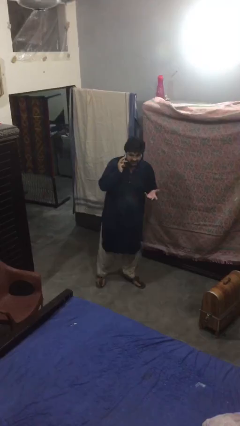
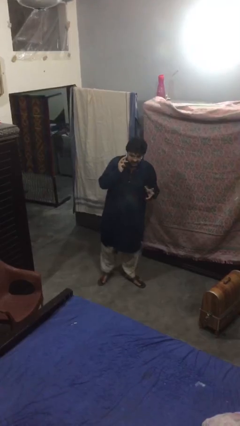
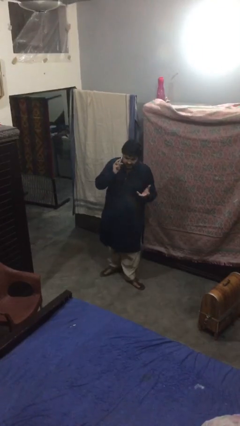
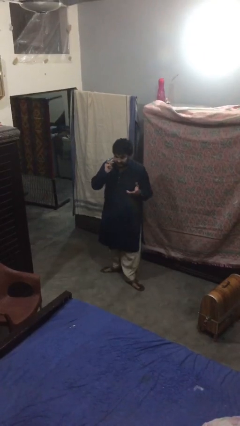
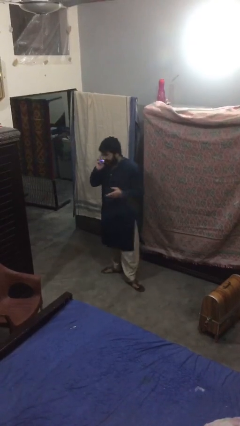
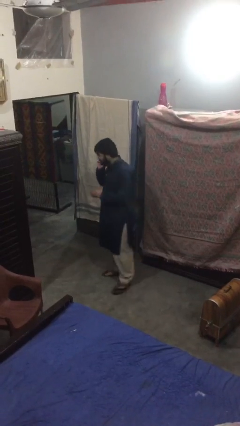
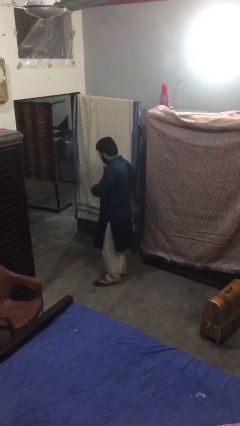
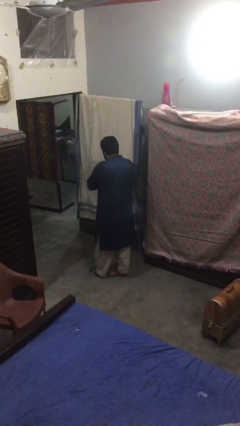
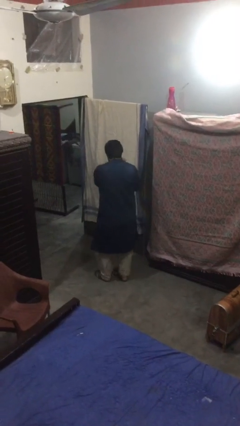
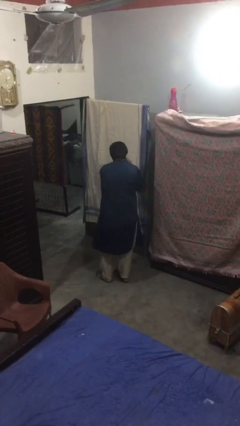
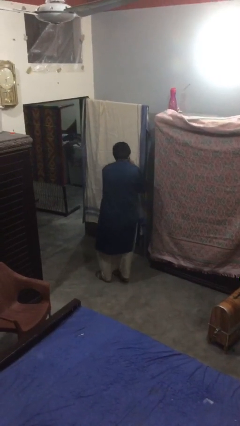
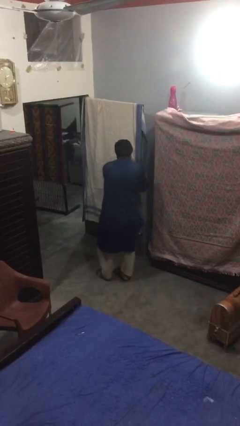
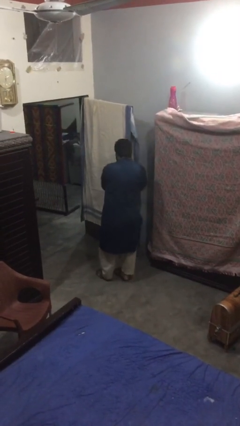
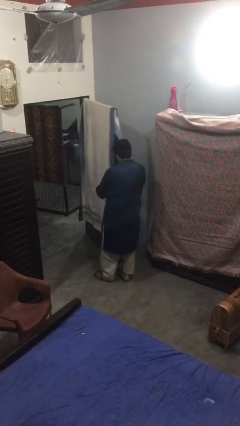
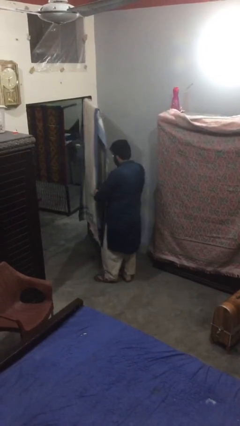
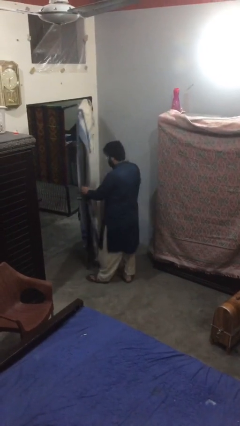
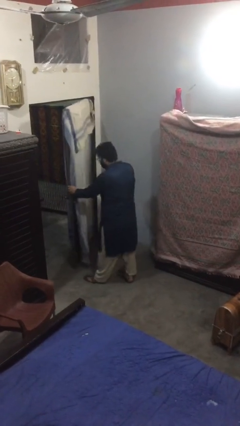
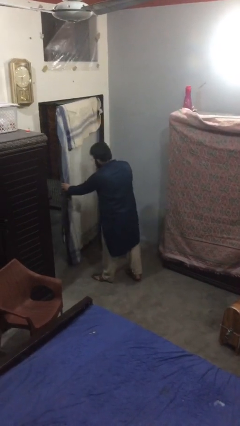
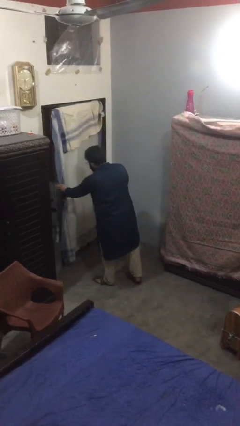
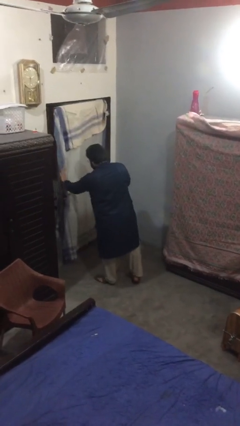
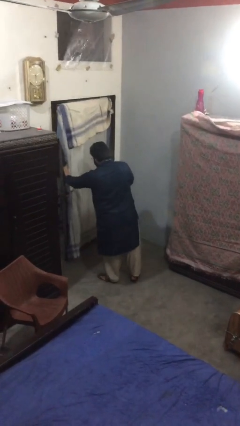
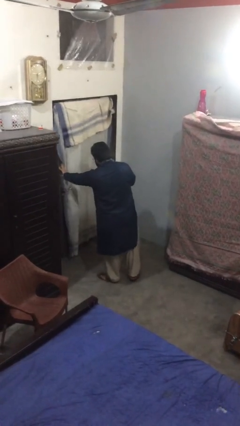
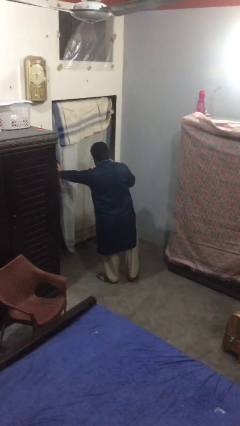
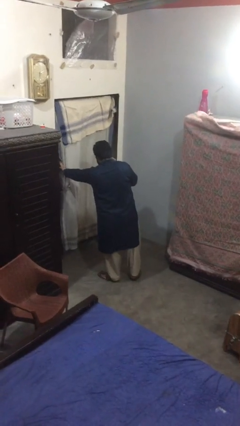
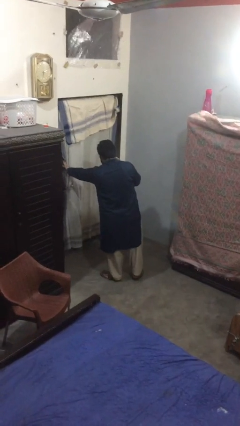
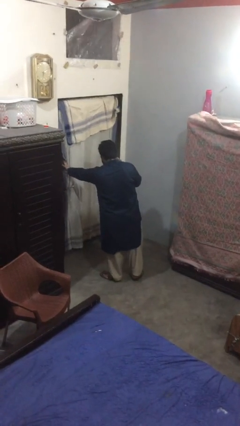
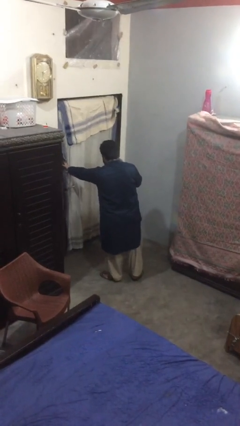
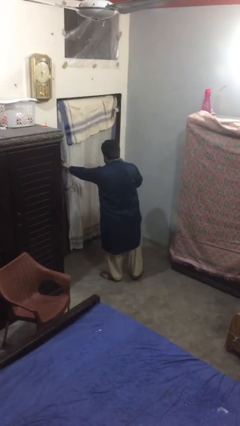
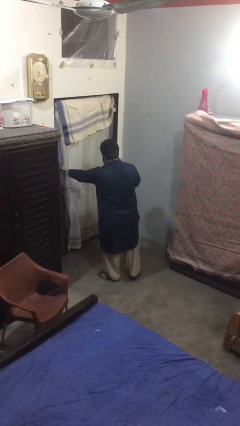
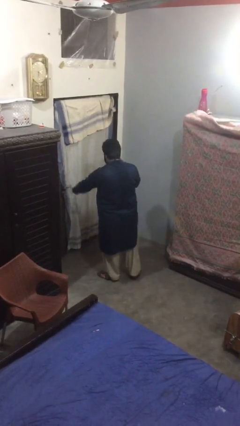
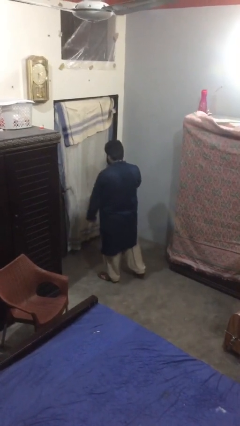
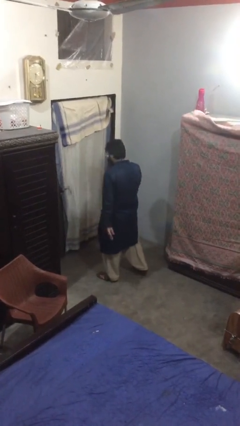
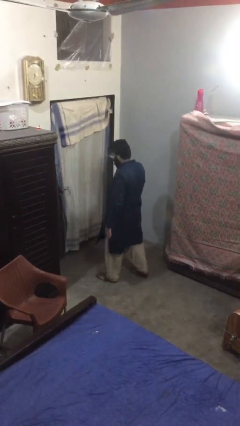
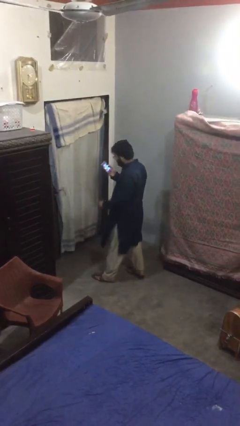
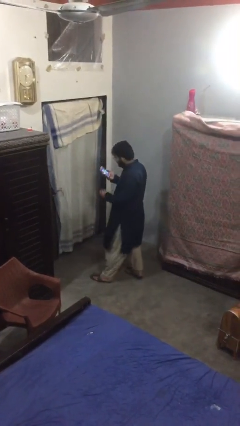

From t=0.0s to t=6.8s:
person closes facility door

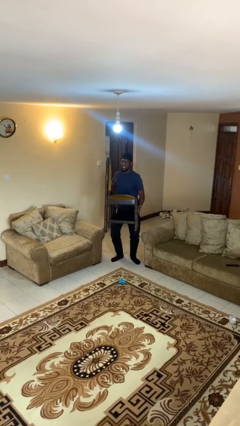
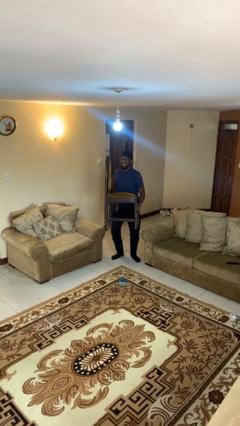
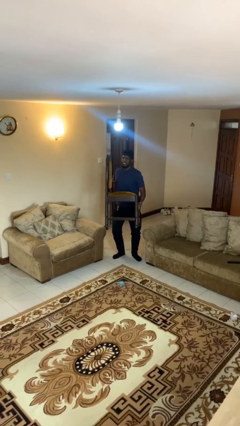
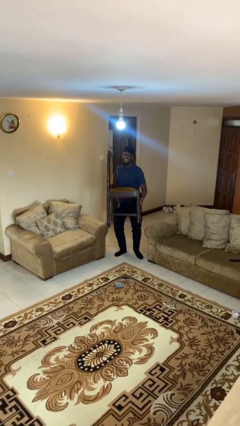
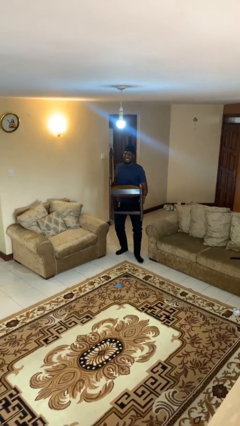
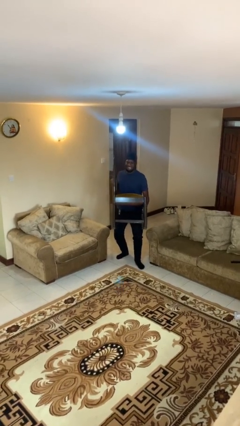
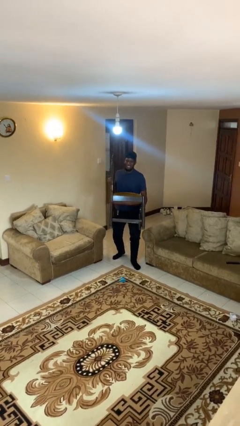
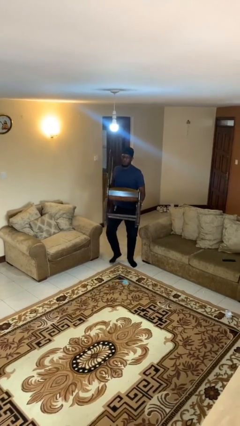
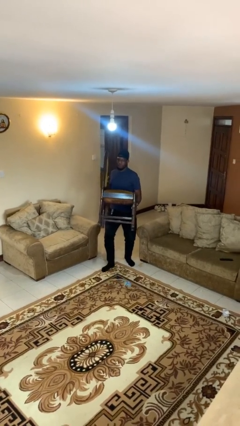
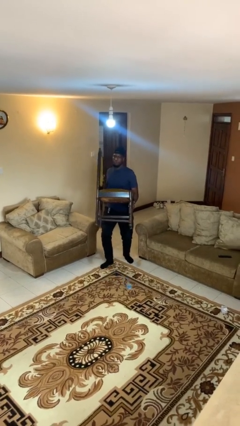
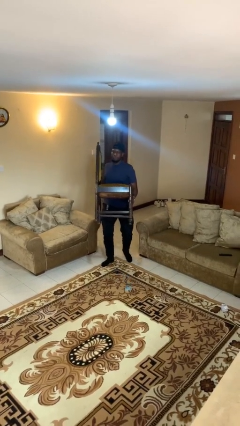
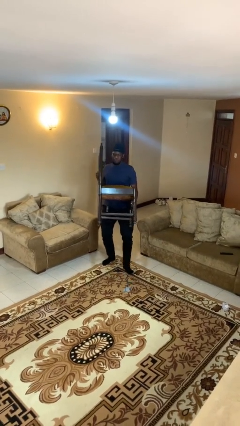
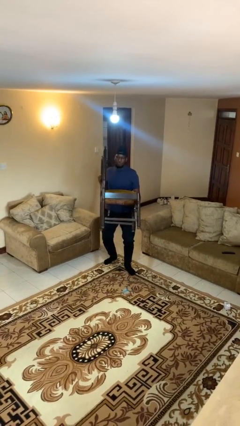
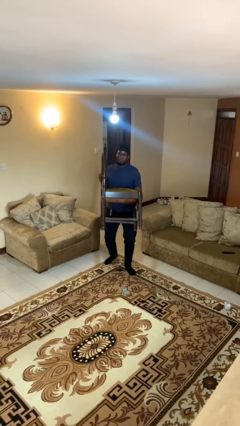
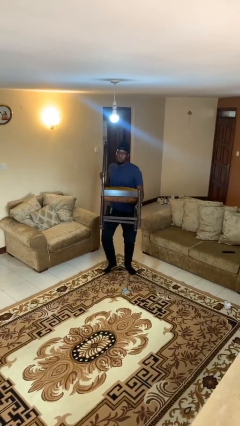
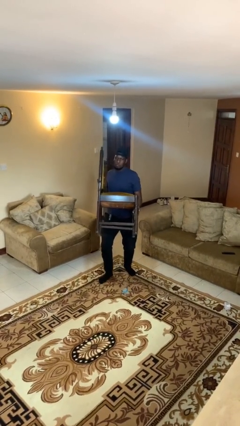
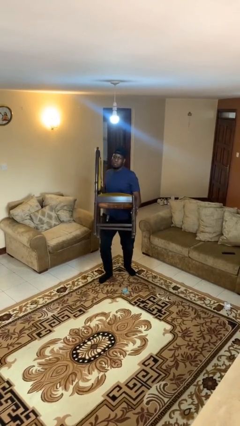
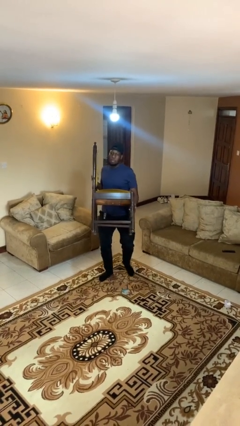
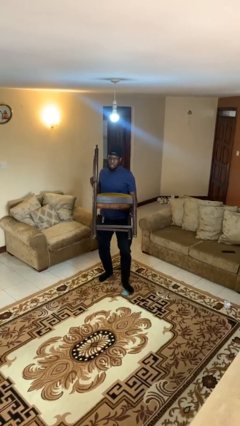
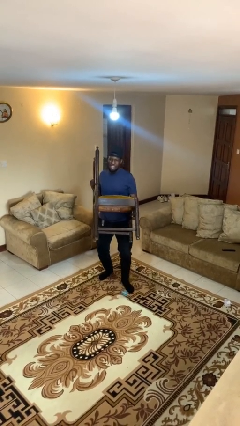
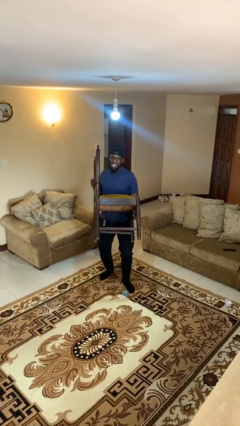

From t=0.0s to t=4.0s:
person carries heavy object

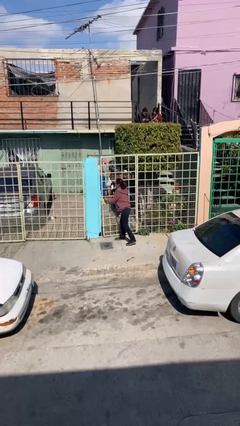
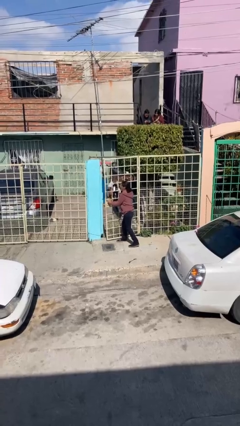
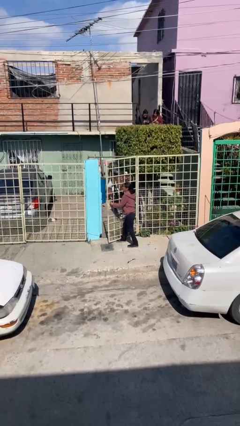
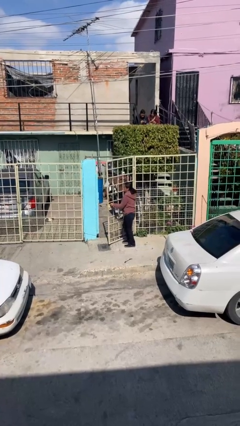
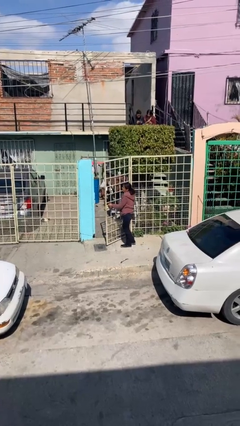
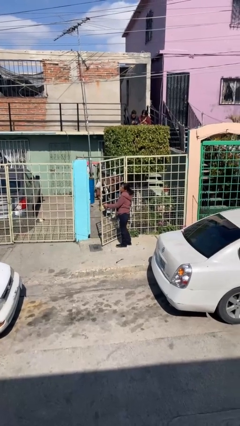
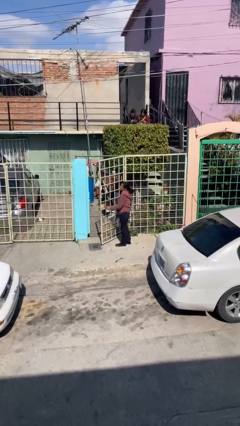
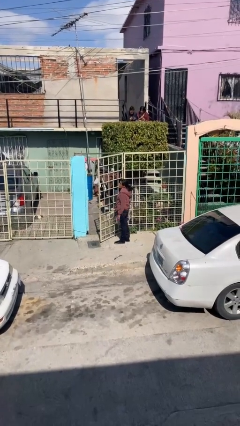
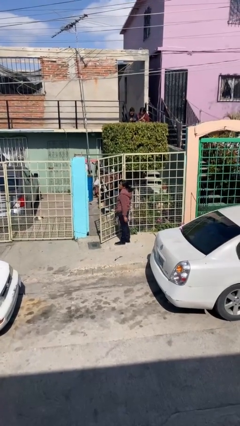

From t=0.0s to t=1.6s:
person opens facility door

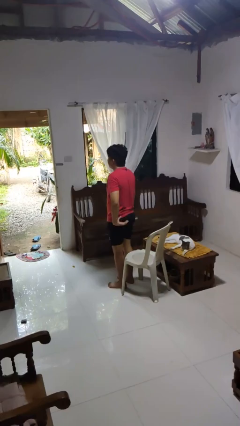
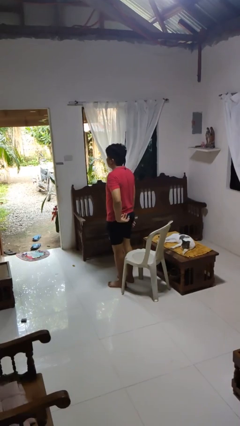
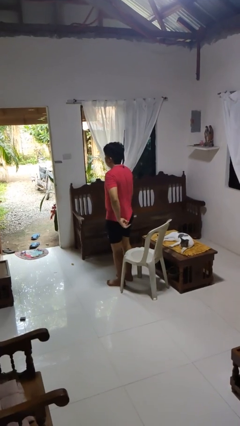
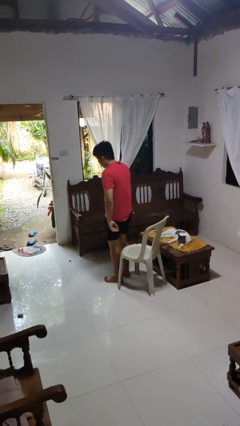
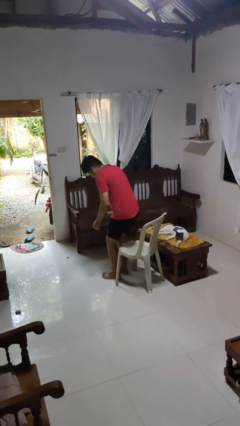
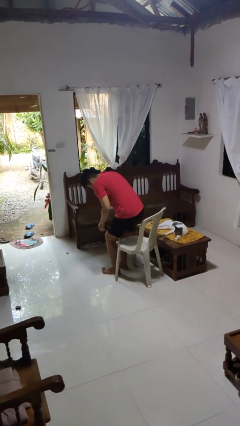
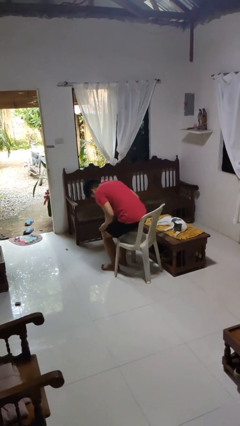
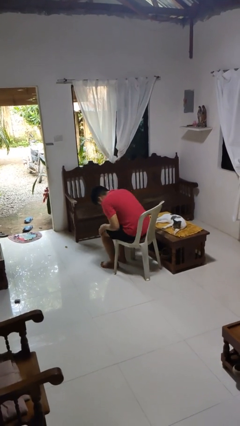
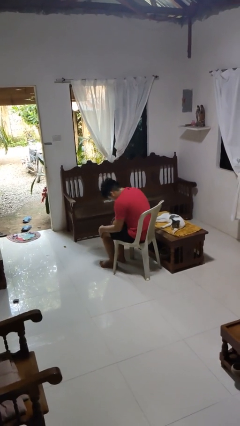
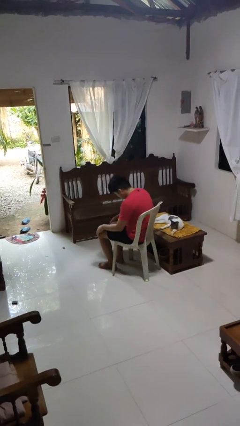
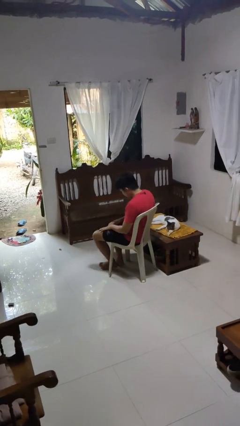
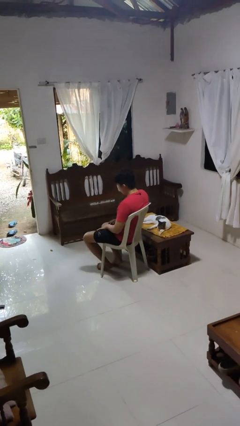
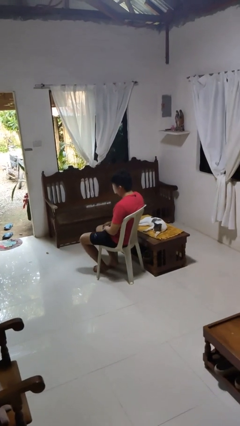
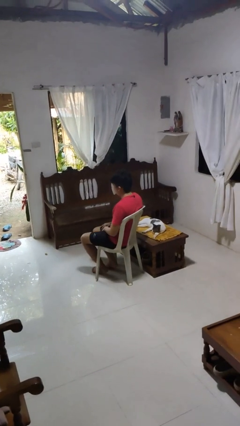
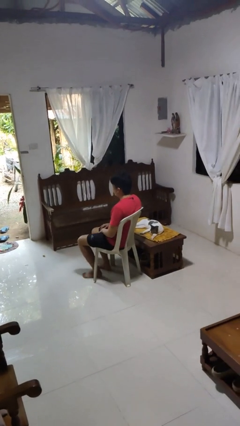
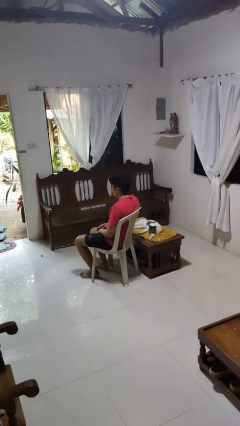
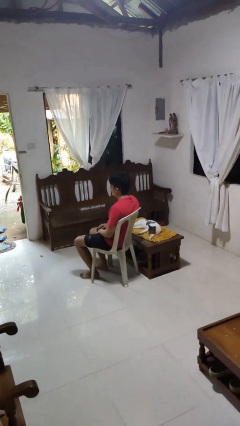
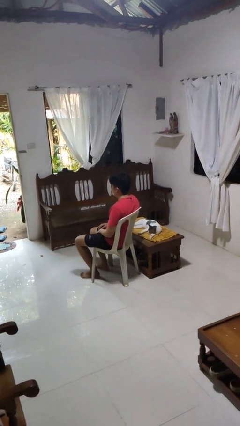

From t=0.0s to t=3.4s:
person sits down

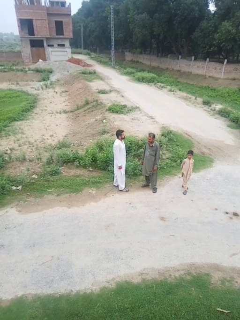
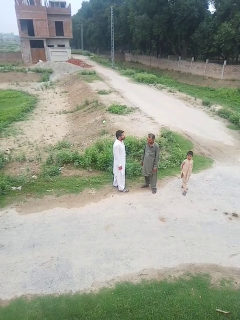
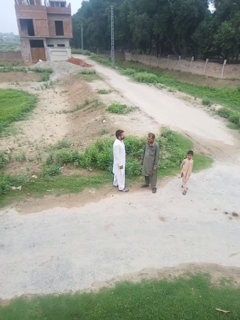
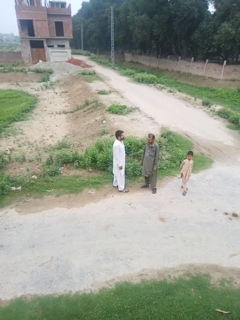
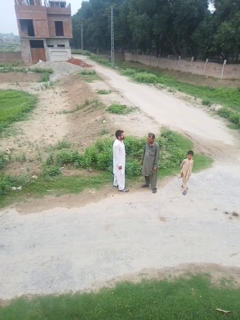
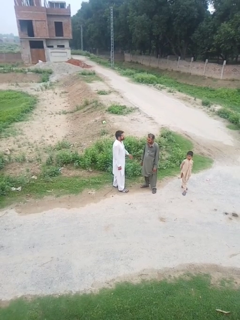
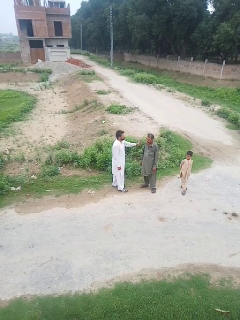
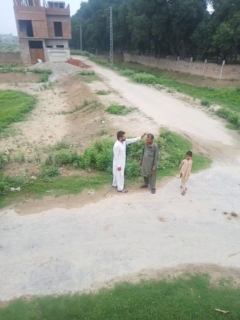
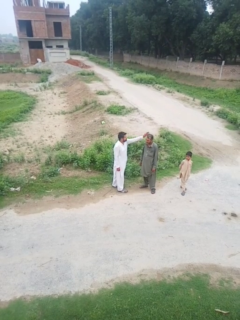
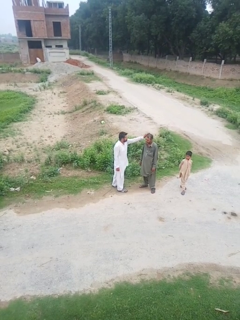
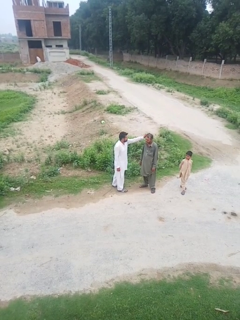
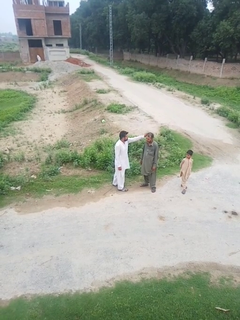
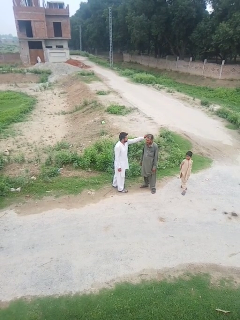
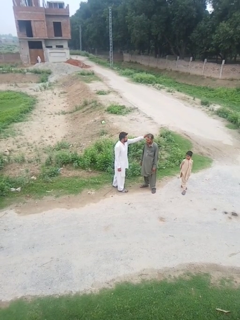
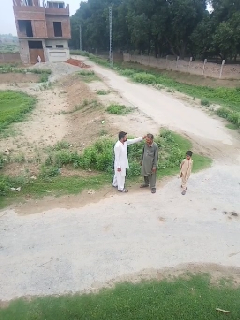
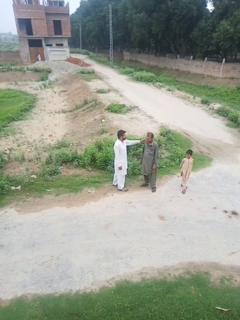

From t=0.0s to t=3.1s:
person touches face of person
